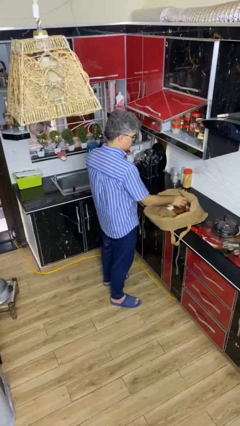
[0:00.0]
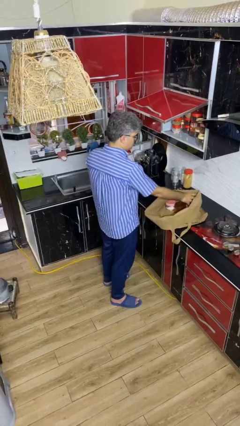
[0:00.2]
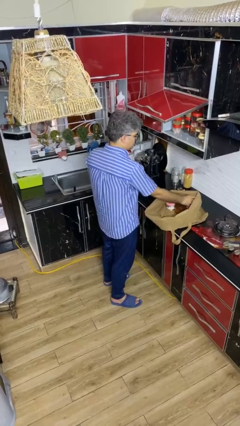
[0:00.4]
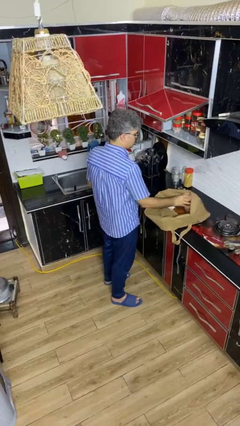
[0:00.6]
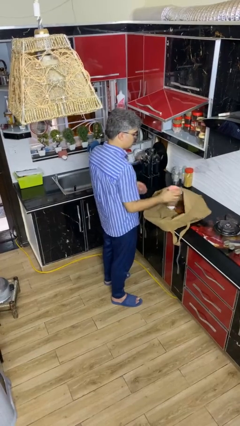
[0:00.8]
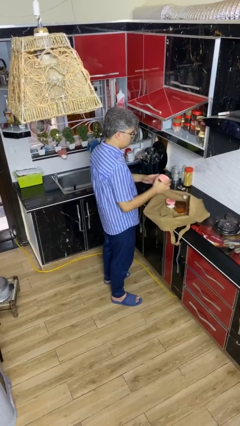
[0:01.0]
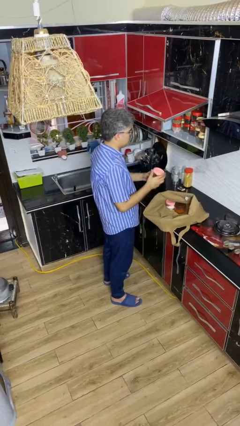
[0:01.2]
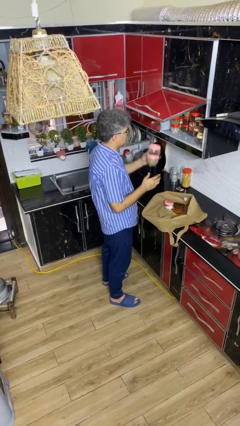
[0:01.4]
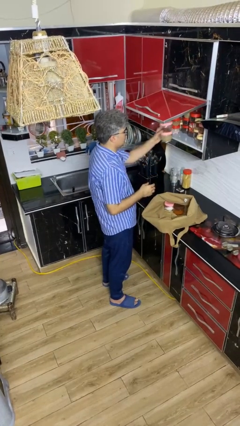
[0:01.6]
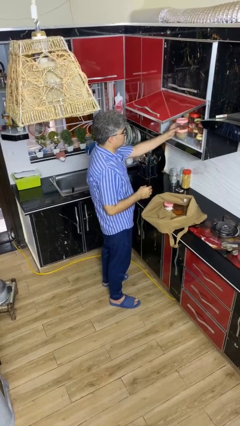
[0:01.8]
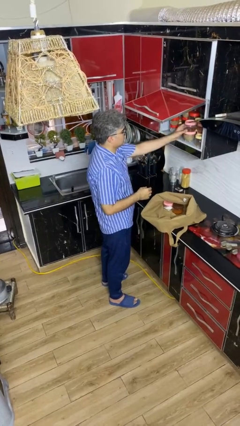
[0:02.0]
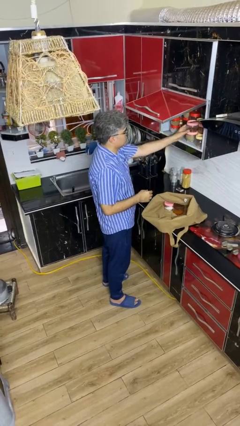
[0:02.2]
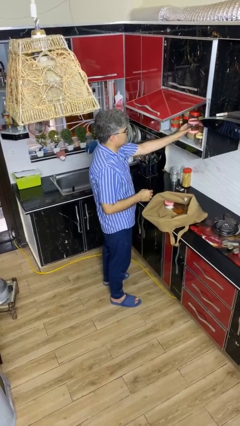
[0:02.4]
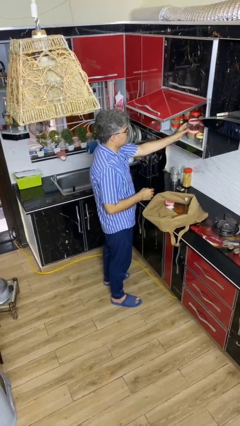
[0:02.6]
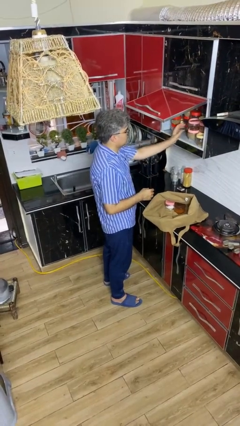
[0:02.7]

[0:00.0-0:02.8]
person loads groceries into cabinet

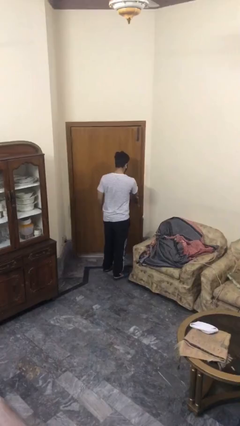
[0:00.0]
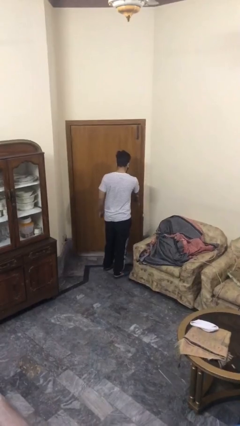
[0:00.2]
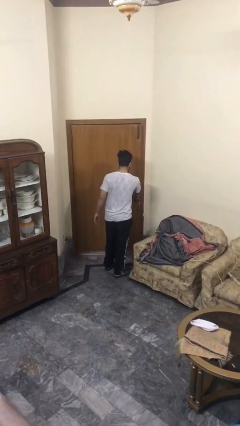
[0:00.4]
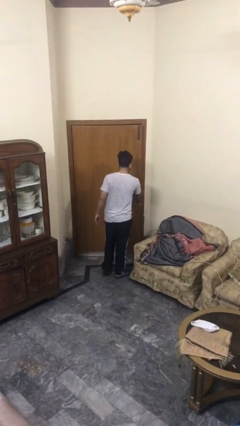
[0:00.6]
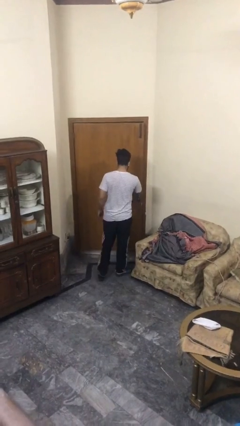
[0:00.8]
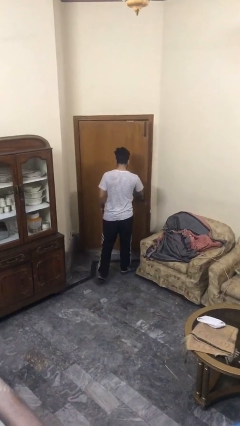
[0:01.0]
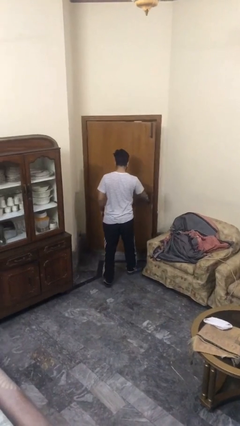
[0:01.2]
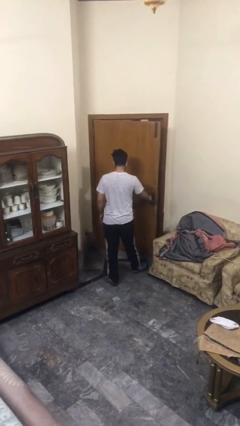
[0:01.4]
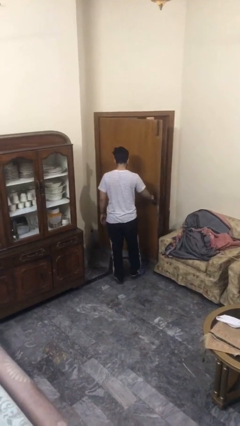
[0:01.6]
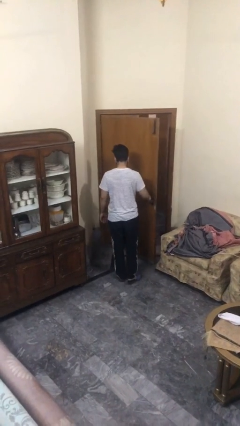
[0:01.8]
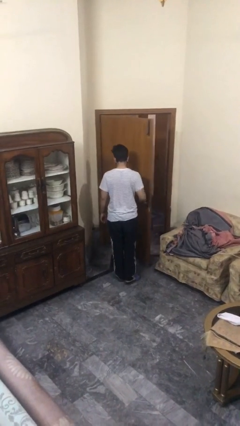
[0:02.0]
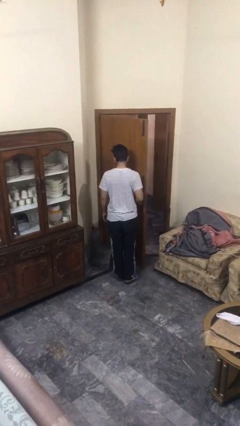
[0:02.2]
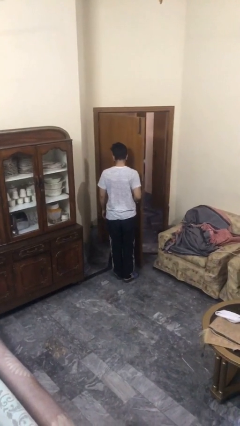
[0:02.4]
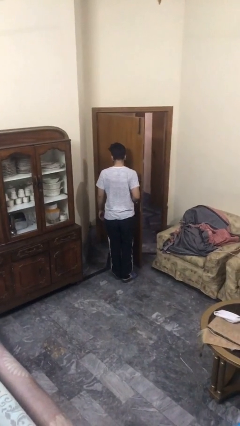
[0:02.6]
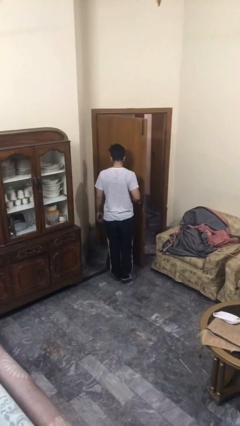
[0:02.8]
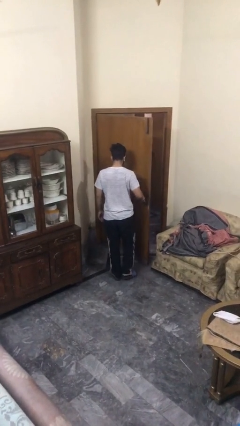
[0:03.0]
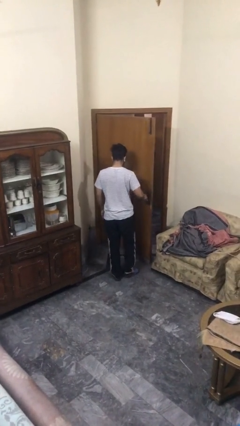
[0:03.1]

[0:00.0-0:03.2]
person opens facility door

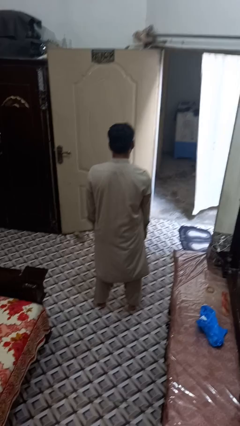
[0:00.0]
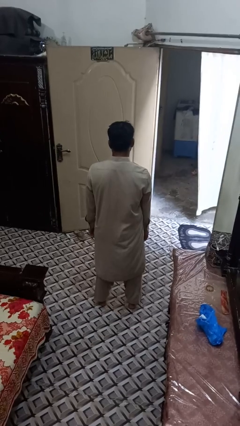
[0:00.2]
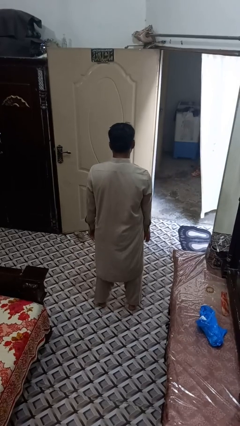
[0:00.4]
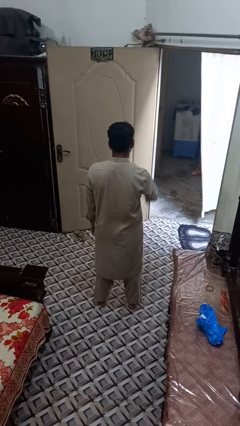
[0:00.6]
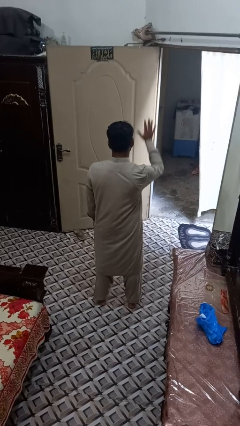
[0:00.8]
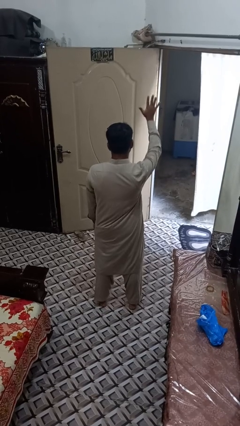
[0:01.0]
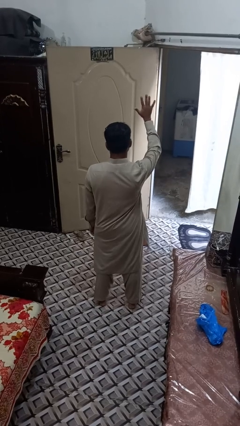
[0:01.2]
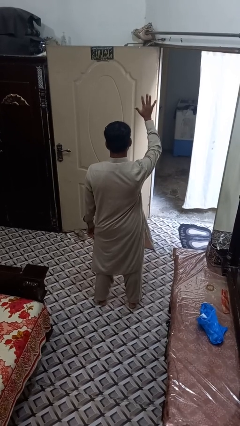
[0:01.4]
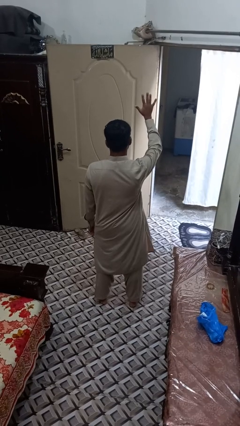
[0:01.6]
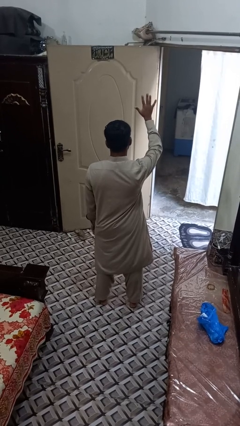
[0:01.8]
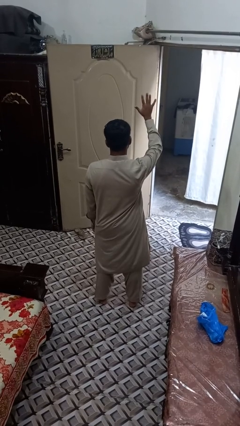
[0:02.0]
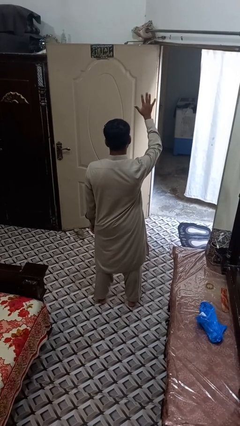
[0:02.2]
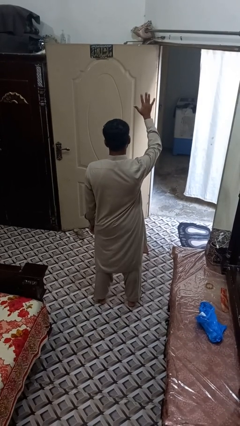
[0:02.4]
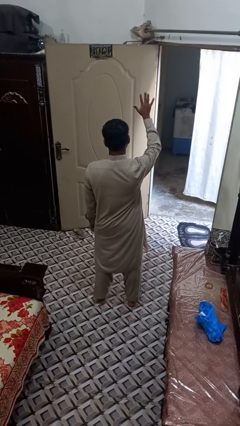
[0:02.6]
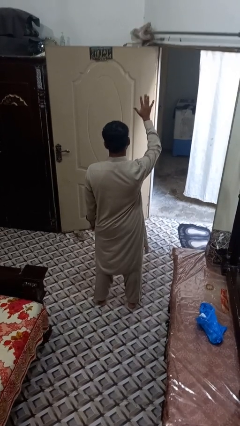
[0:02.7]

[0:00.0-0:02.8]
person gestures number five

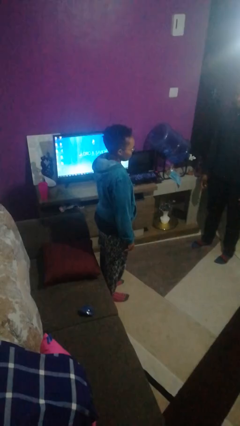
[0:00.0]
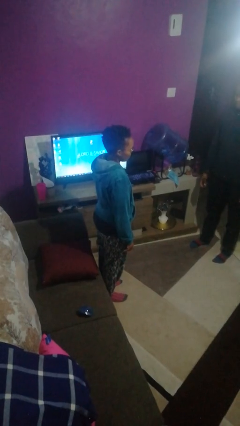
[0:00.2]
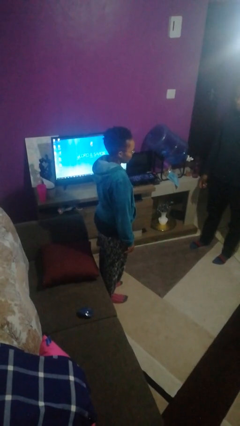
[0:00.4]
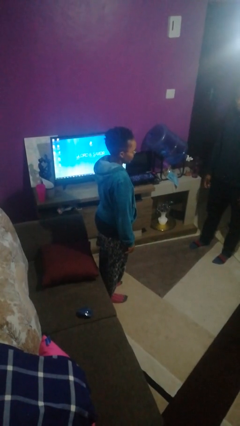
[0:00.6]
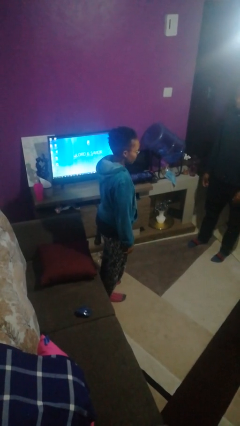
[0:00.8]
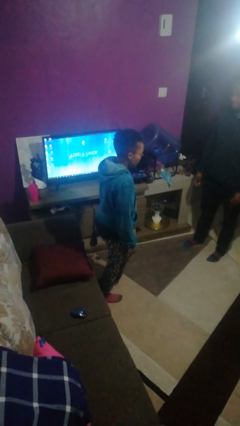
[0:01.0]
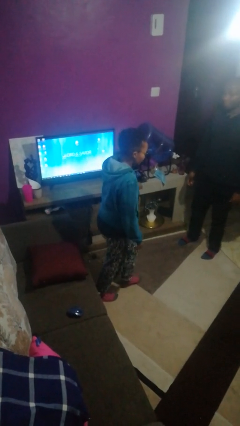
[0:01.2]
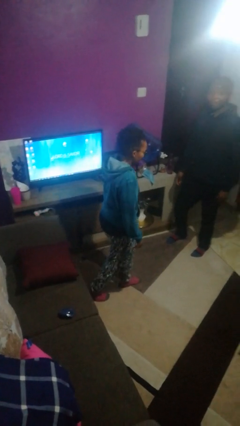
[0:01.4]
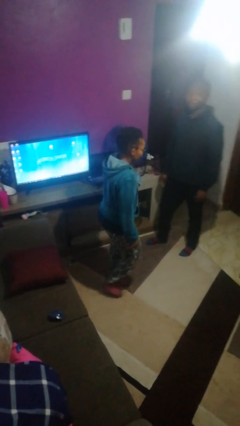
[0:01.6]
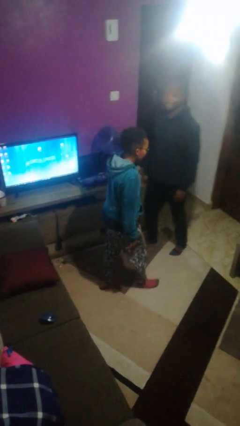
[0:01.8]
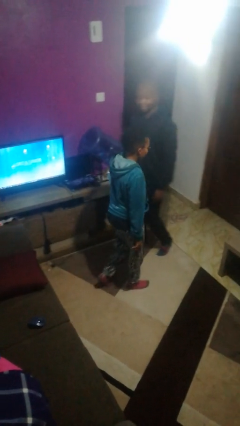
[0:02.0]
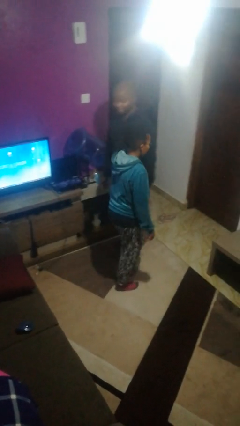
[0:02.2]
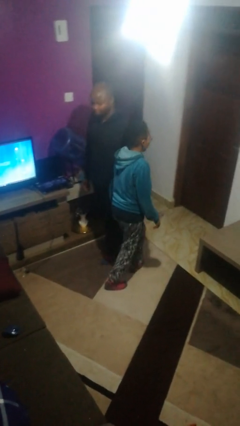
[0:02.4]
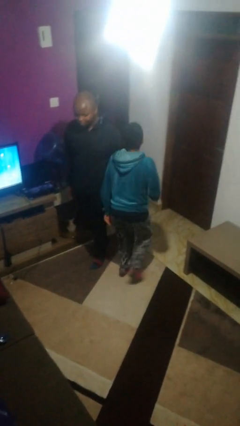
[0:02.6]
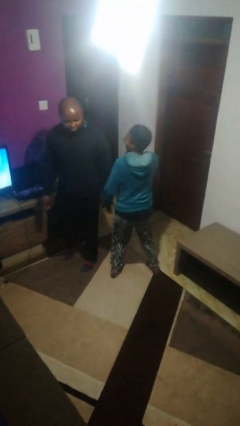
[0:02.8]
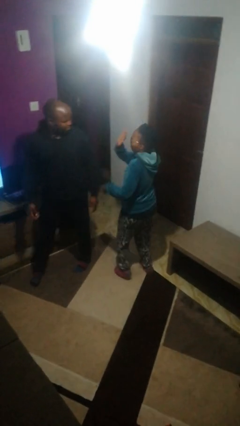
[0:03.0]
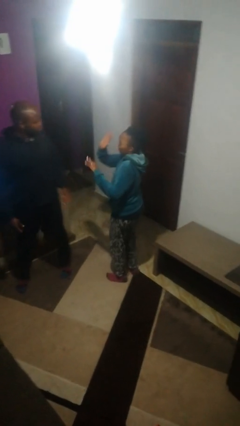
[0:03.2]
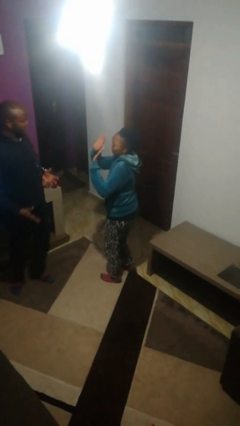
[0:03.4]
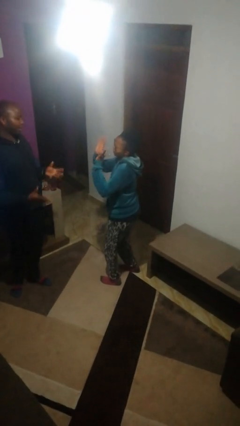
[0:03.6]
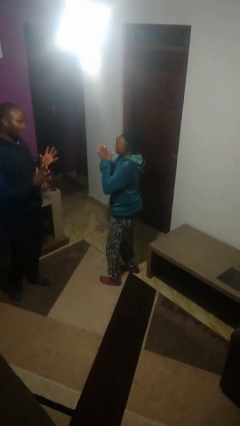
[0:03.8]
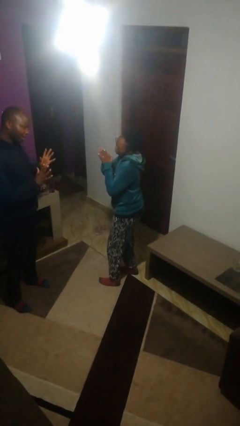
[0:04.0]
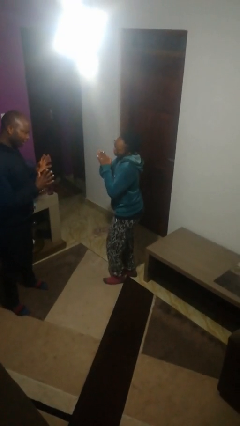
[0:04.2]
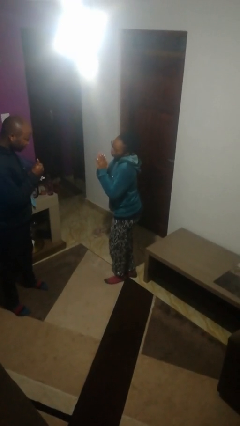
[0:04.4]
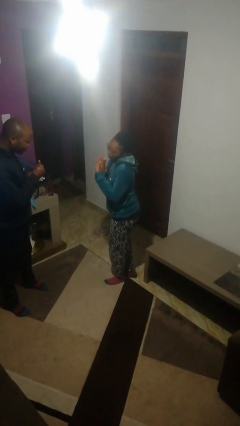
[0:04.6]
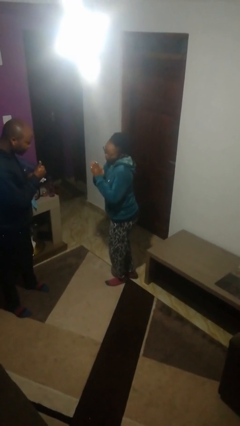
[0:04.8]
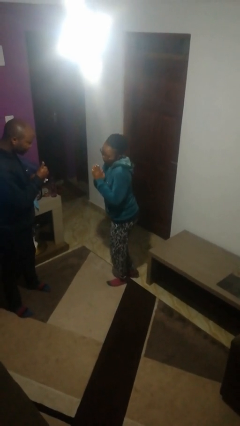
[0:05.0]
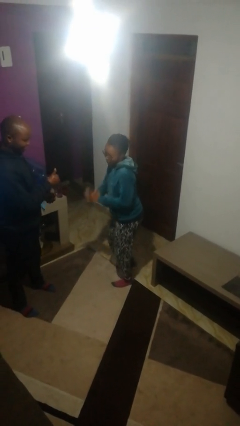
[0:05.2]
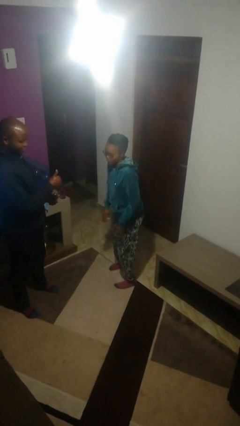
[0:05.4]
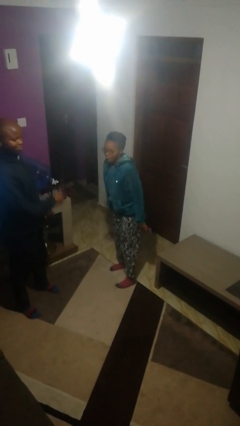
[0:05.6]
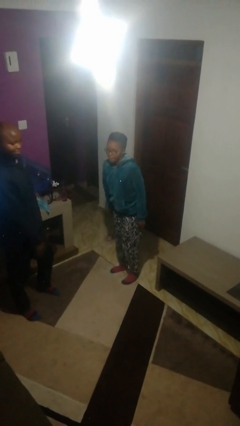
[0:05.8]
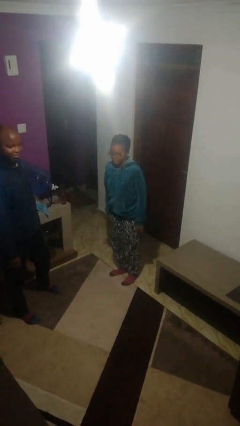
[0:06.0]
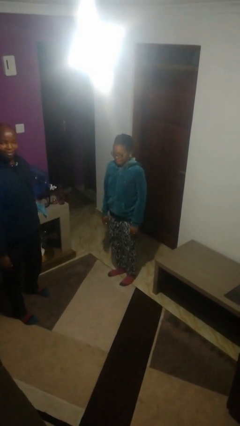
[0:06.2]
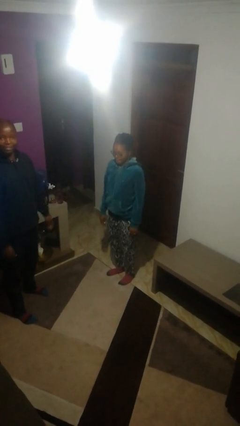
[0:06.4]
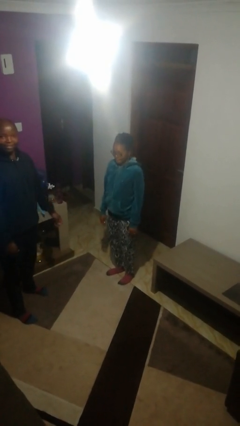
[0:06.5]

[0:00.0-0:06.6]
person bumps into person

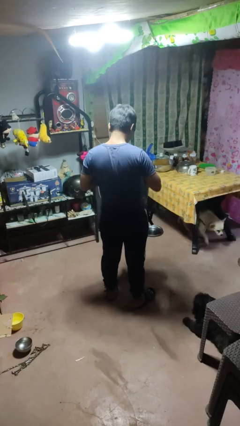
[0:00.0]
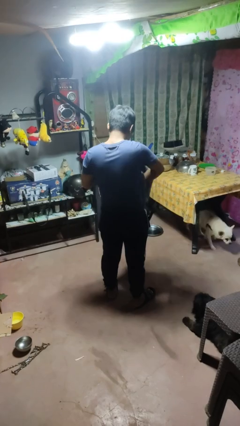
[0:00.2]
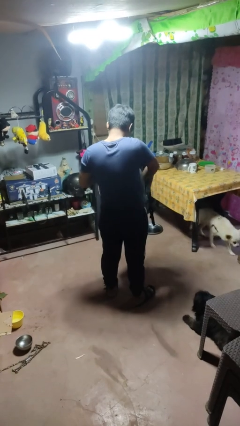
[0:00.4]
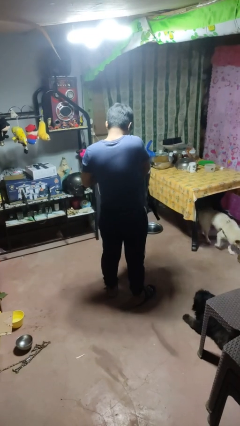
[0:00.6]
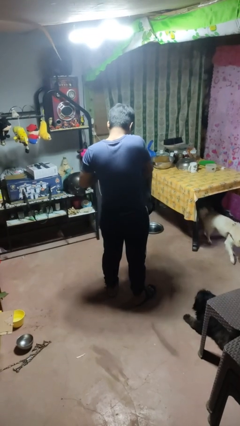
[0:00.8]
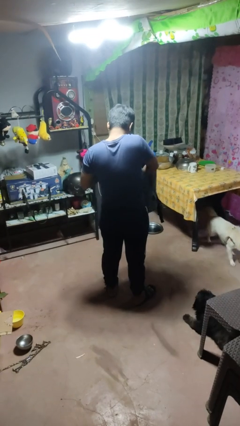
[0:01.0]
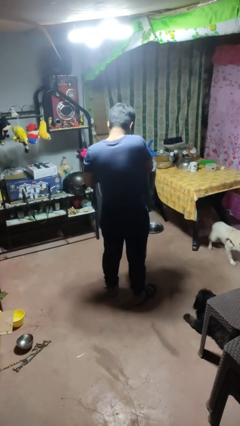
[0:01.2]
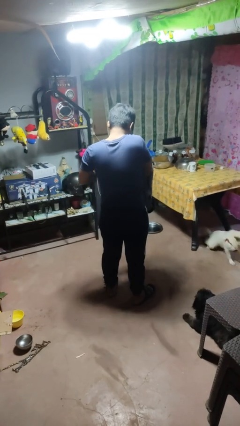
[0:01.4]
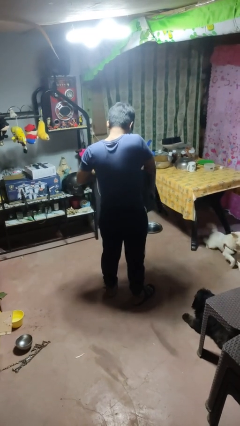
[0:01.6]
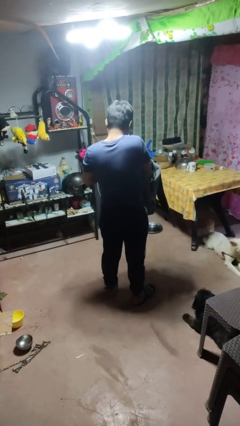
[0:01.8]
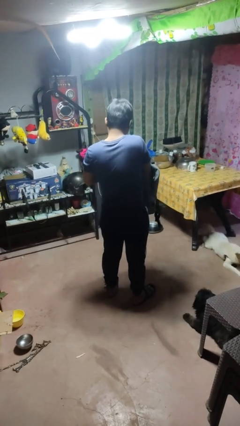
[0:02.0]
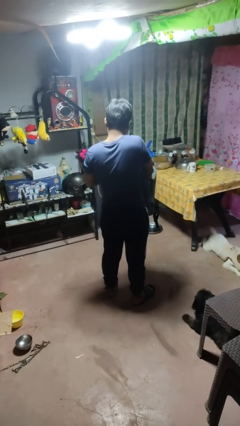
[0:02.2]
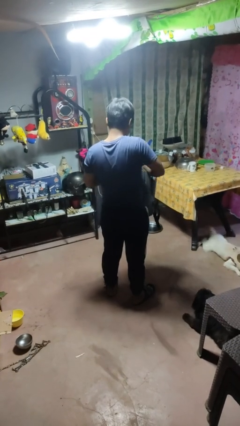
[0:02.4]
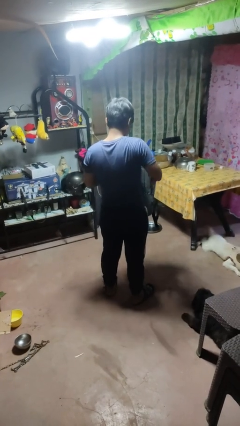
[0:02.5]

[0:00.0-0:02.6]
person searches in bag
